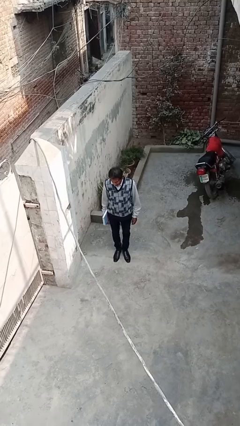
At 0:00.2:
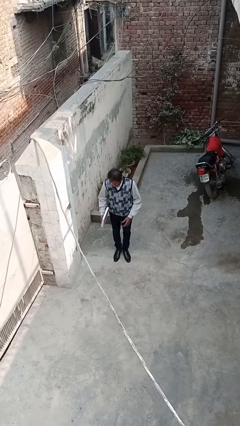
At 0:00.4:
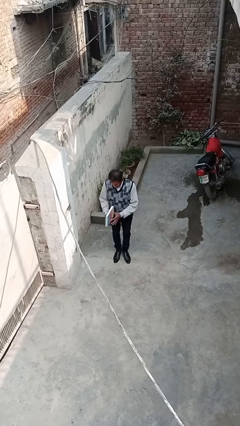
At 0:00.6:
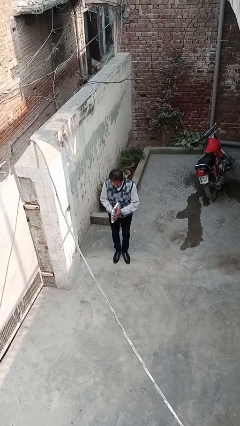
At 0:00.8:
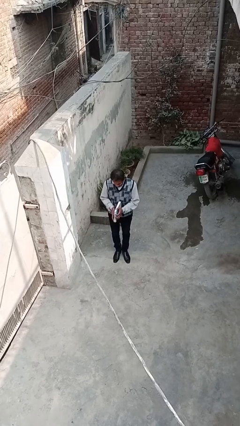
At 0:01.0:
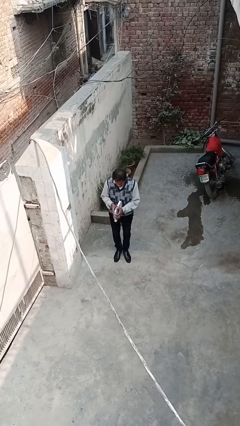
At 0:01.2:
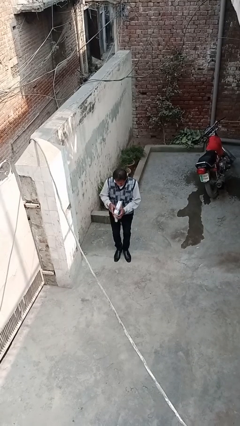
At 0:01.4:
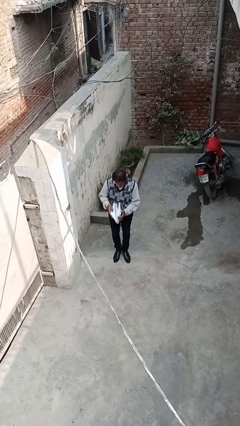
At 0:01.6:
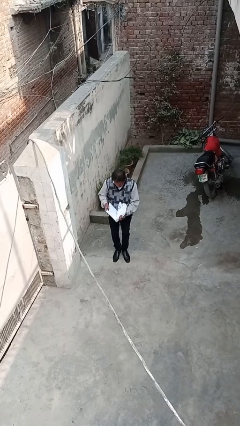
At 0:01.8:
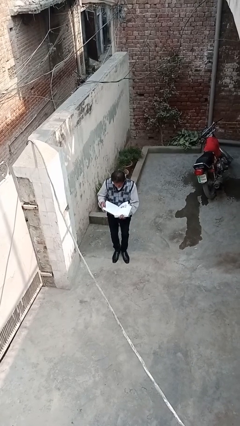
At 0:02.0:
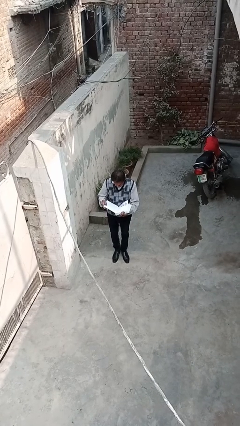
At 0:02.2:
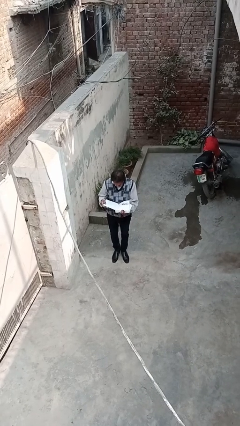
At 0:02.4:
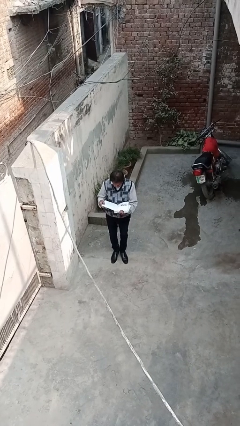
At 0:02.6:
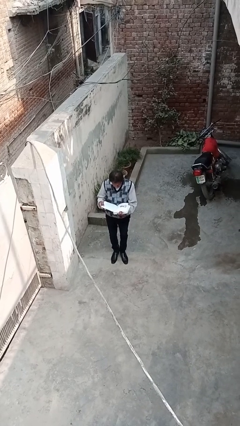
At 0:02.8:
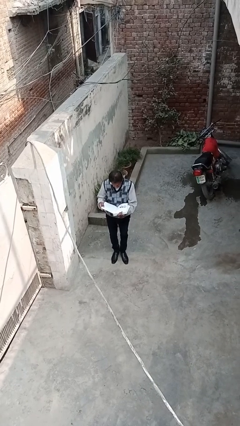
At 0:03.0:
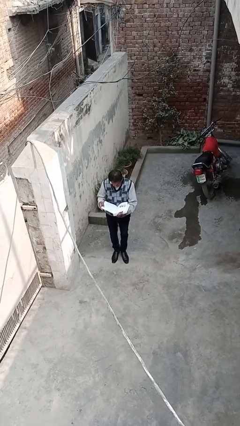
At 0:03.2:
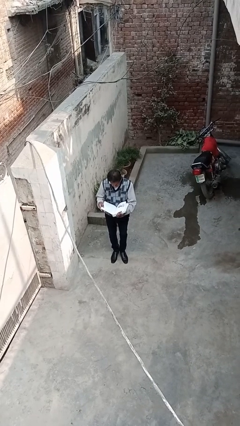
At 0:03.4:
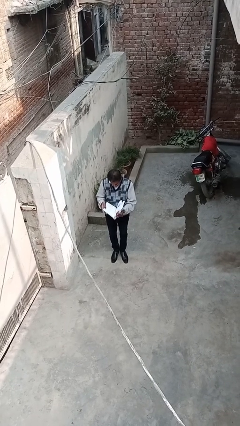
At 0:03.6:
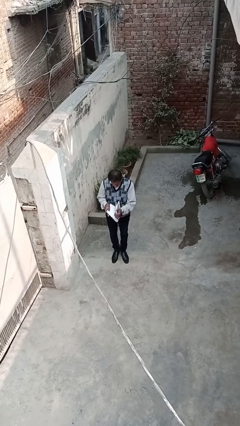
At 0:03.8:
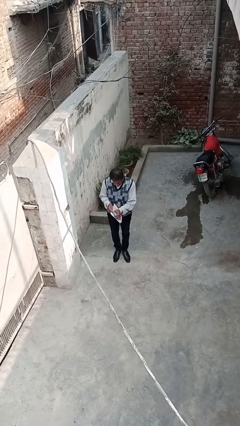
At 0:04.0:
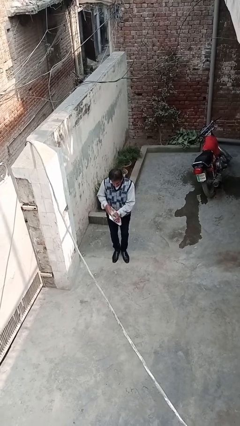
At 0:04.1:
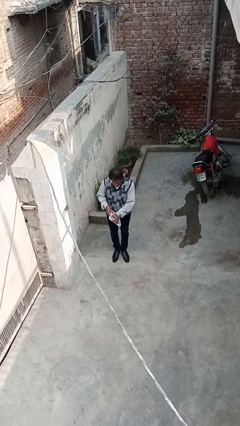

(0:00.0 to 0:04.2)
person reads document

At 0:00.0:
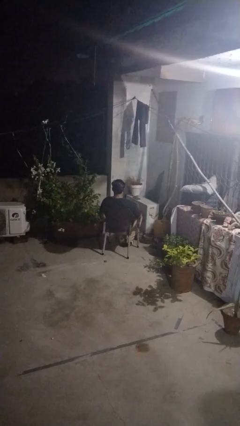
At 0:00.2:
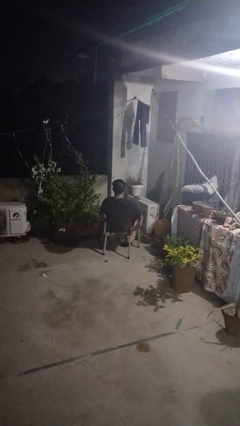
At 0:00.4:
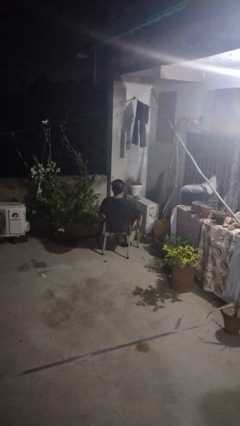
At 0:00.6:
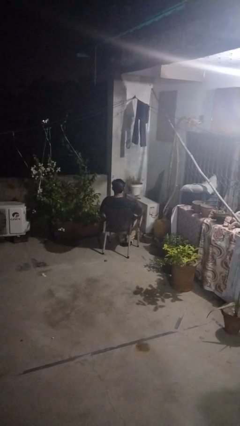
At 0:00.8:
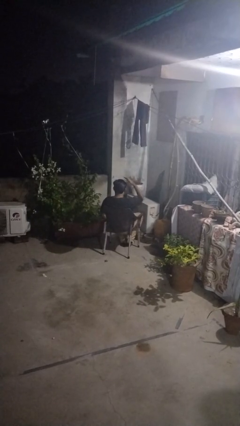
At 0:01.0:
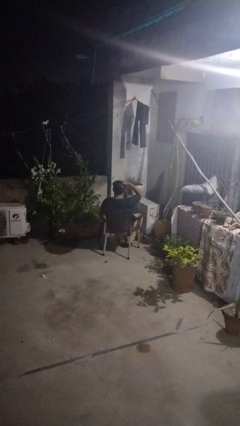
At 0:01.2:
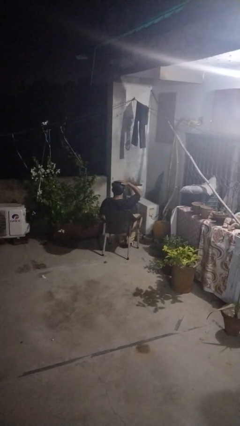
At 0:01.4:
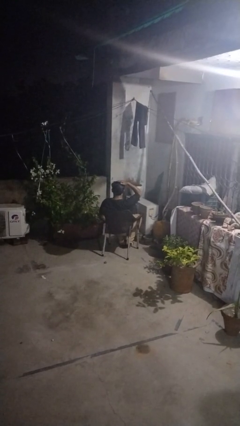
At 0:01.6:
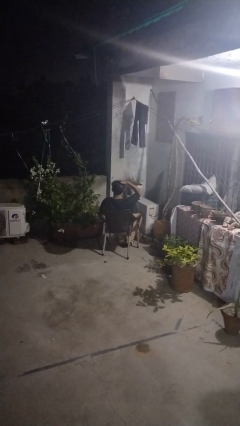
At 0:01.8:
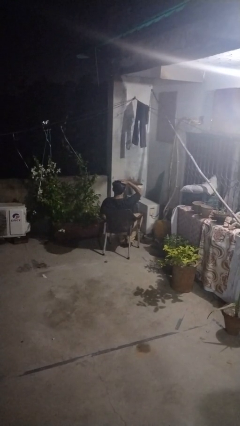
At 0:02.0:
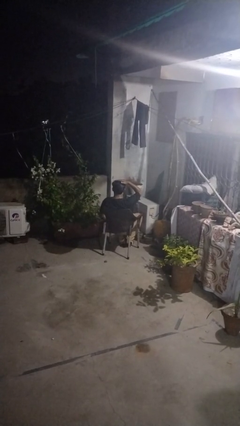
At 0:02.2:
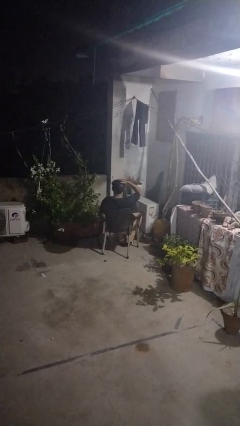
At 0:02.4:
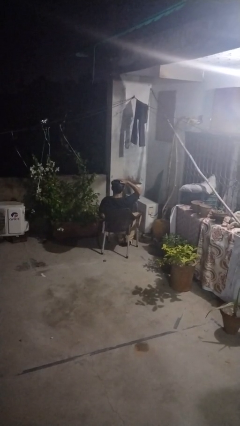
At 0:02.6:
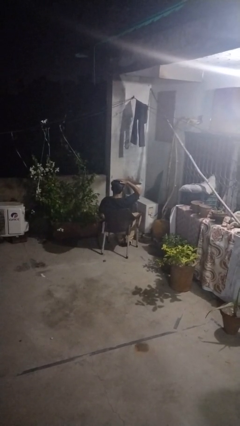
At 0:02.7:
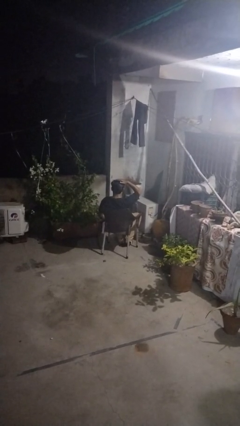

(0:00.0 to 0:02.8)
person pats head

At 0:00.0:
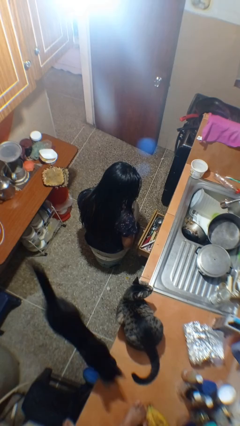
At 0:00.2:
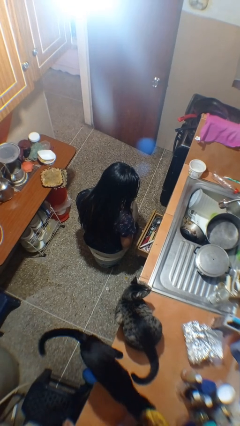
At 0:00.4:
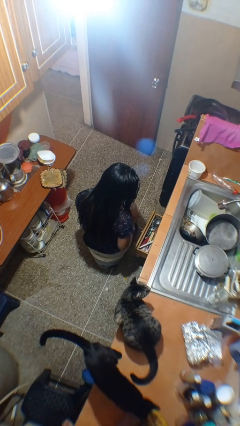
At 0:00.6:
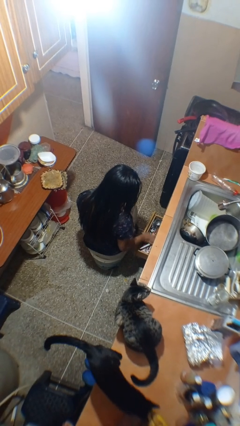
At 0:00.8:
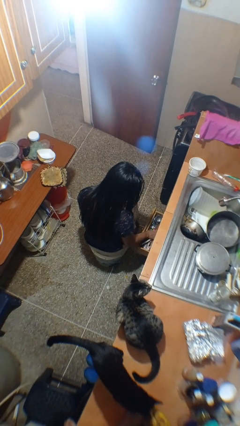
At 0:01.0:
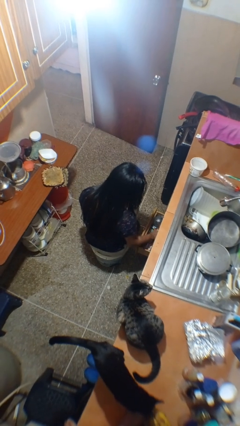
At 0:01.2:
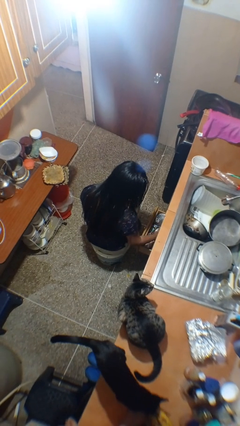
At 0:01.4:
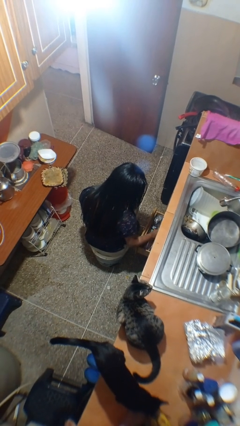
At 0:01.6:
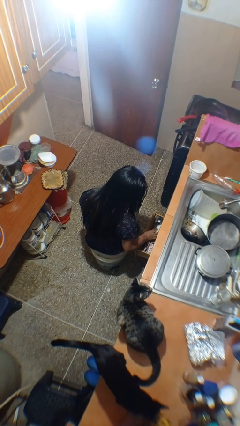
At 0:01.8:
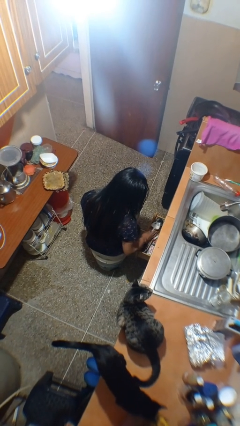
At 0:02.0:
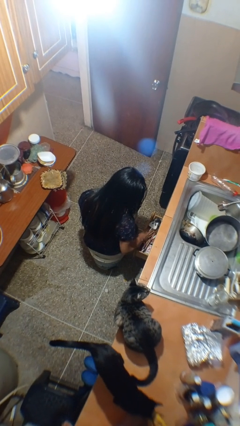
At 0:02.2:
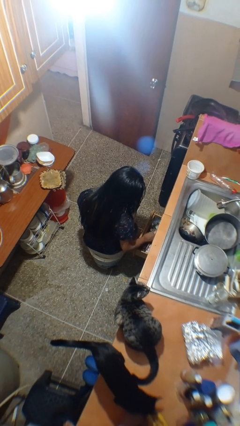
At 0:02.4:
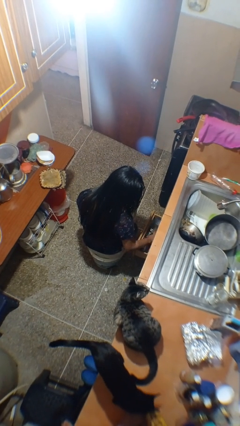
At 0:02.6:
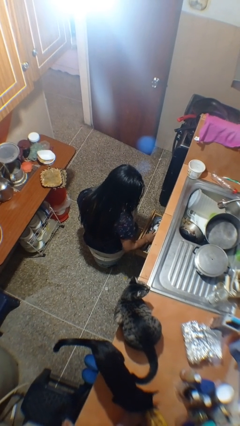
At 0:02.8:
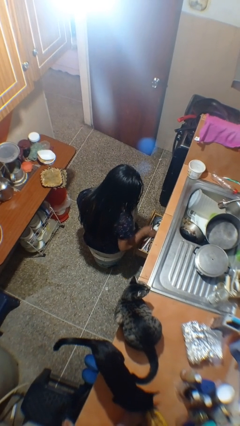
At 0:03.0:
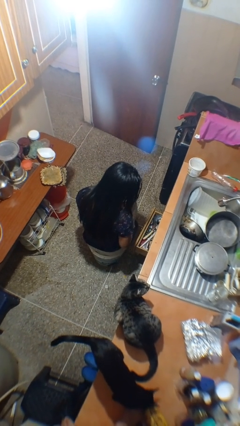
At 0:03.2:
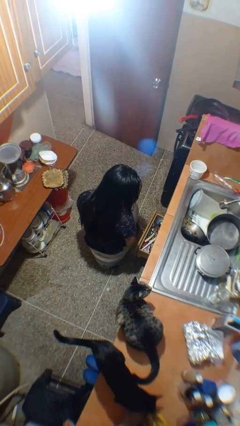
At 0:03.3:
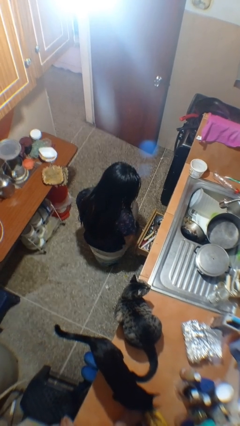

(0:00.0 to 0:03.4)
person searches in kitchen drawer

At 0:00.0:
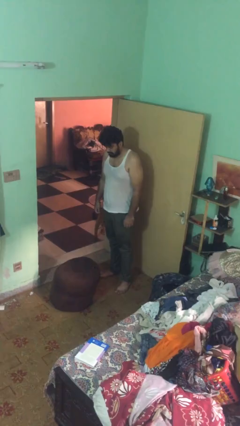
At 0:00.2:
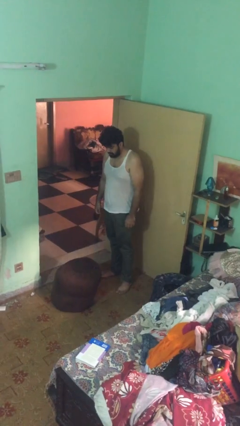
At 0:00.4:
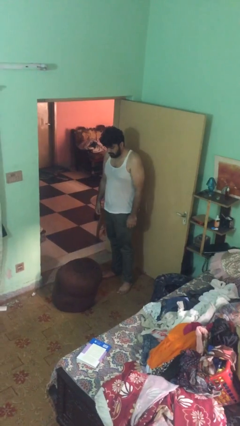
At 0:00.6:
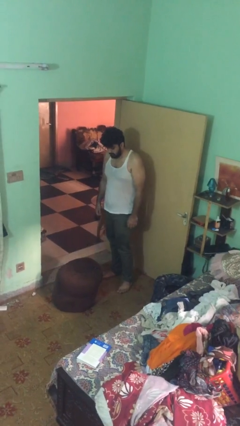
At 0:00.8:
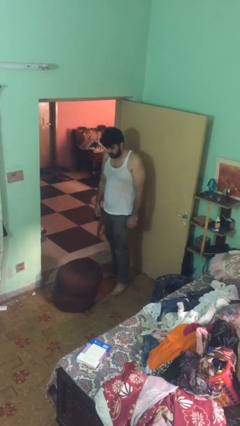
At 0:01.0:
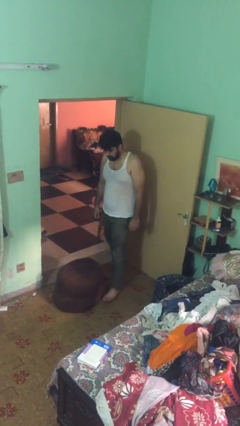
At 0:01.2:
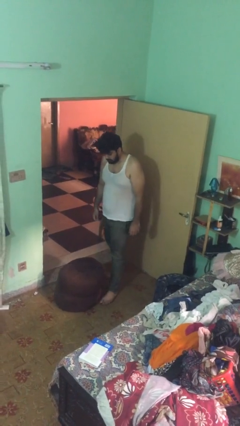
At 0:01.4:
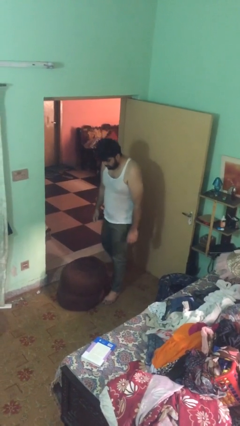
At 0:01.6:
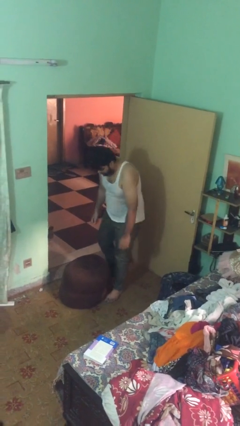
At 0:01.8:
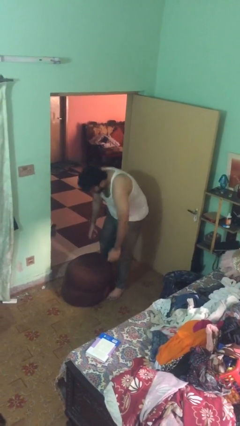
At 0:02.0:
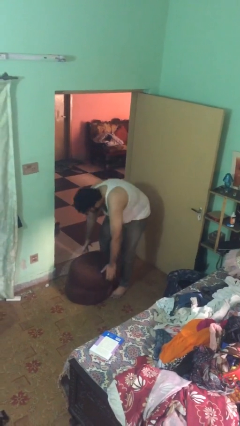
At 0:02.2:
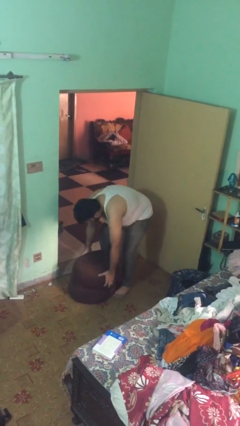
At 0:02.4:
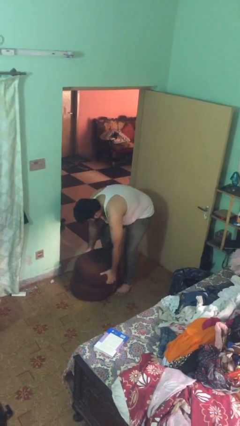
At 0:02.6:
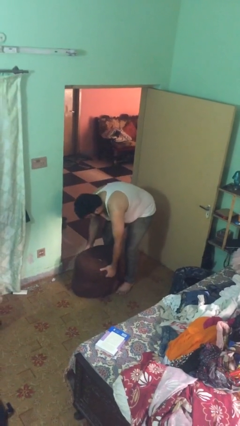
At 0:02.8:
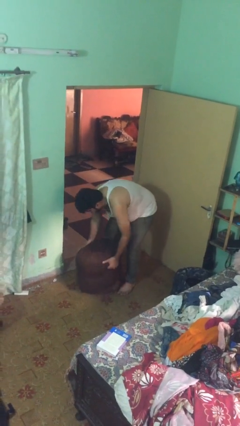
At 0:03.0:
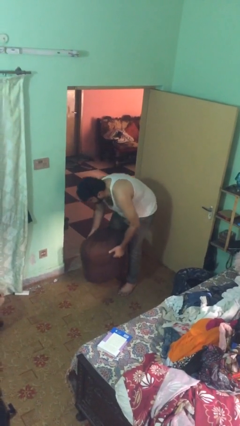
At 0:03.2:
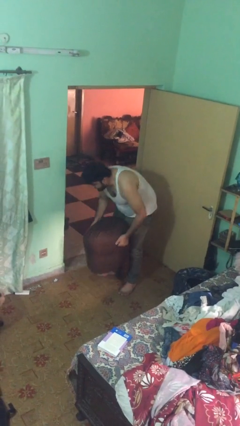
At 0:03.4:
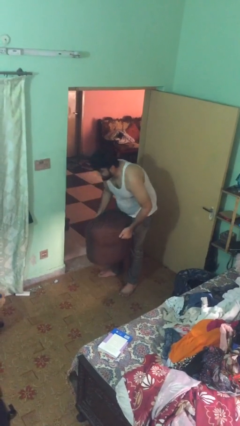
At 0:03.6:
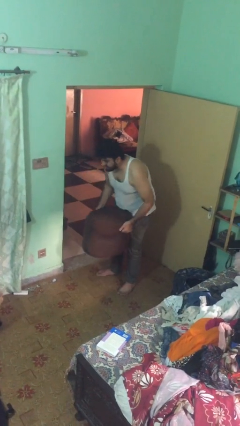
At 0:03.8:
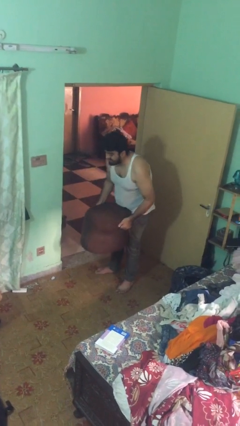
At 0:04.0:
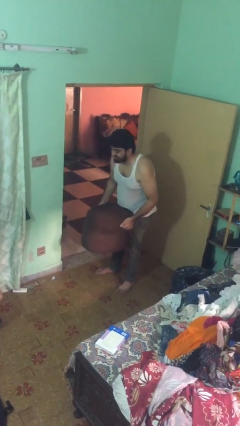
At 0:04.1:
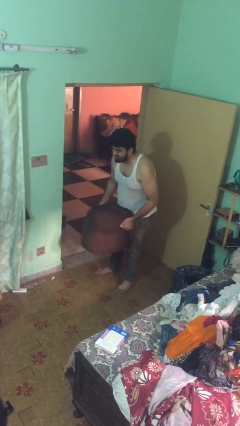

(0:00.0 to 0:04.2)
person picks up object from floor

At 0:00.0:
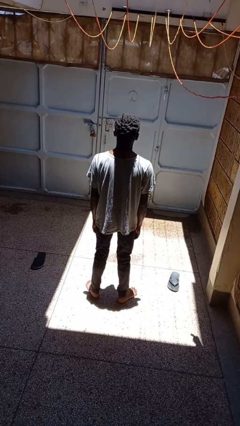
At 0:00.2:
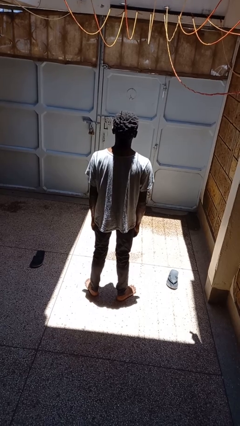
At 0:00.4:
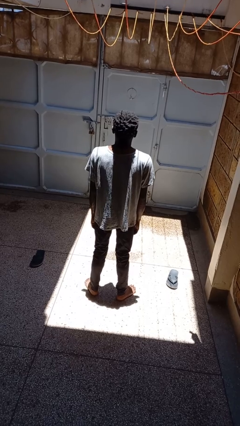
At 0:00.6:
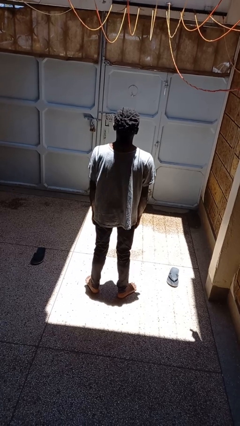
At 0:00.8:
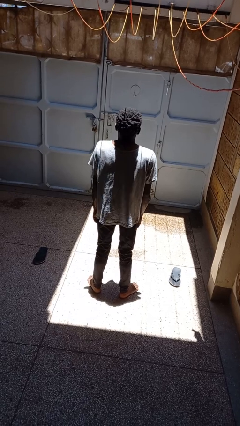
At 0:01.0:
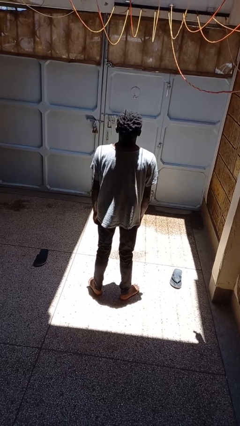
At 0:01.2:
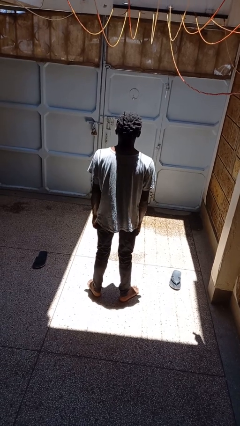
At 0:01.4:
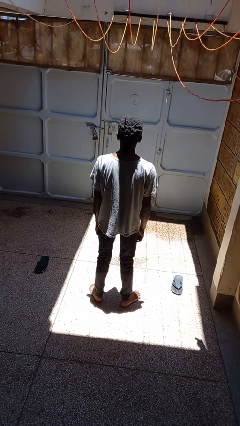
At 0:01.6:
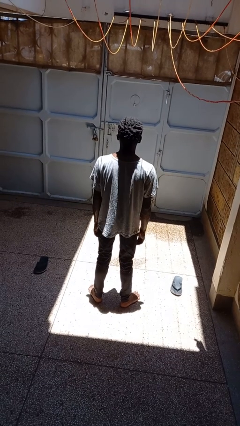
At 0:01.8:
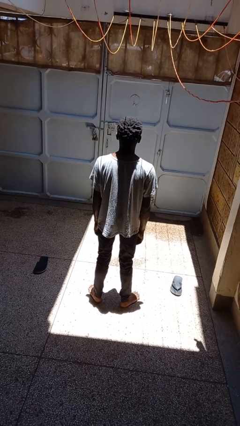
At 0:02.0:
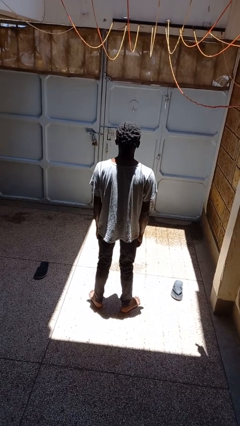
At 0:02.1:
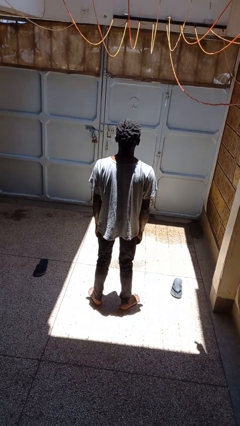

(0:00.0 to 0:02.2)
person shrugs

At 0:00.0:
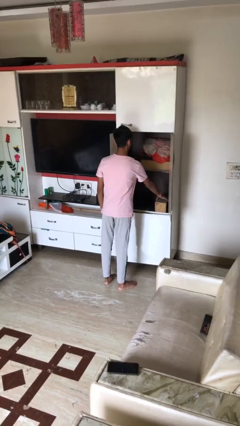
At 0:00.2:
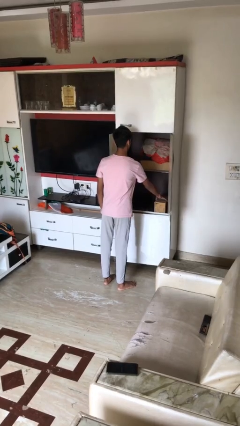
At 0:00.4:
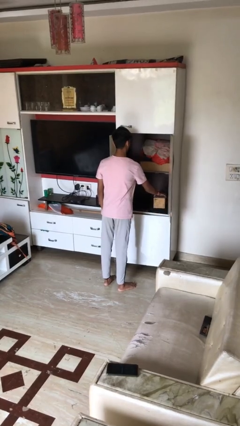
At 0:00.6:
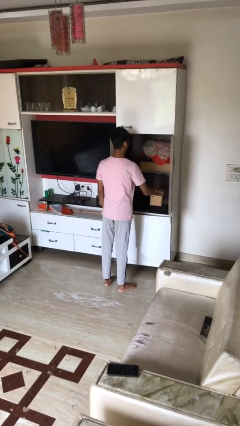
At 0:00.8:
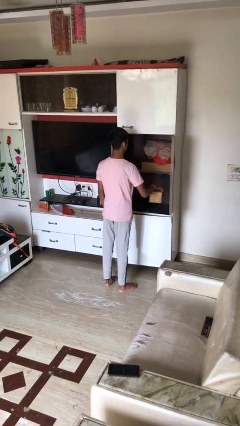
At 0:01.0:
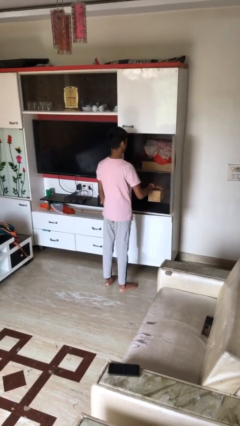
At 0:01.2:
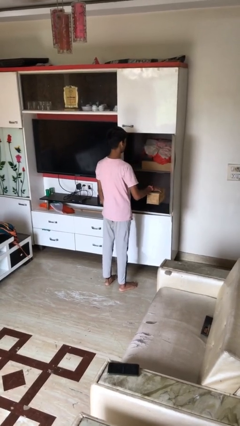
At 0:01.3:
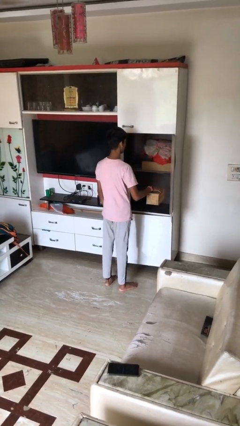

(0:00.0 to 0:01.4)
person picks up object from cabinet
